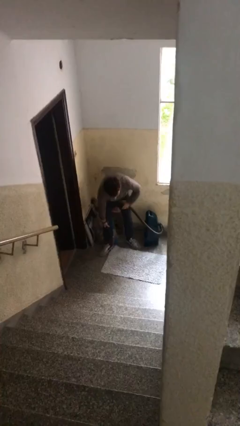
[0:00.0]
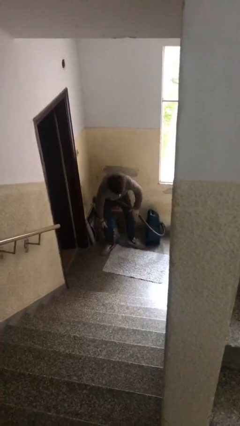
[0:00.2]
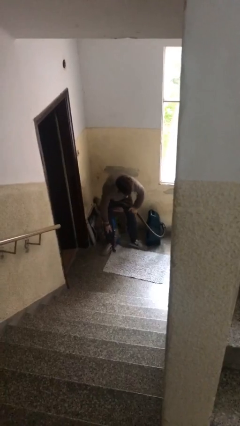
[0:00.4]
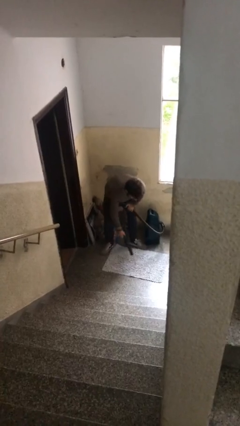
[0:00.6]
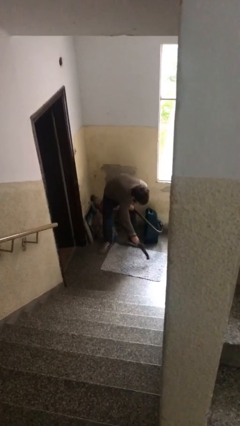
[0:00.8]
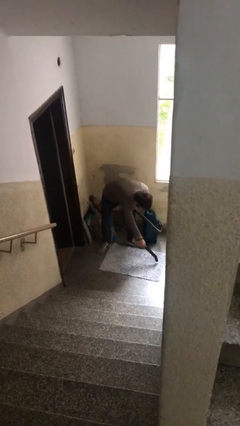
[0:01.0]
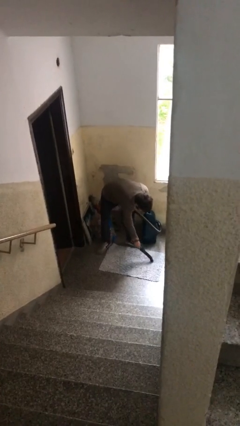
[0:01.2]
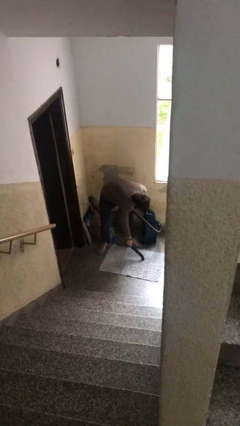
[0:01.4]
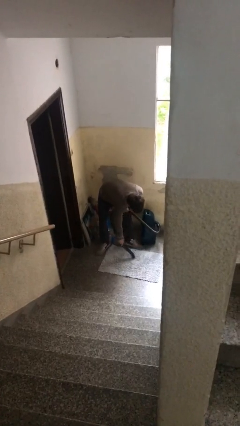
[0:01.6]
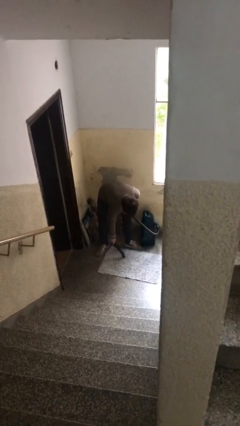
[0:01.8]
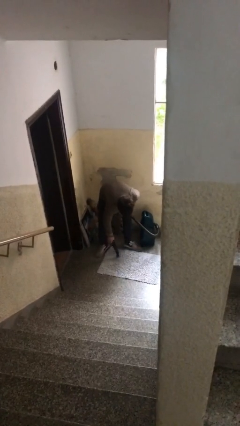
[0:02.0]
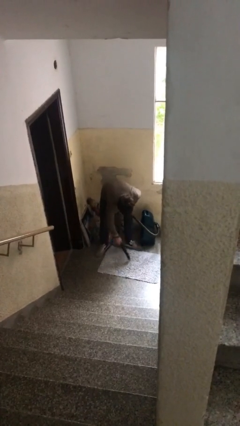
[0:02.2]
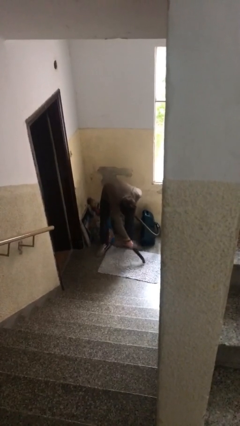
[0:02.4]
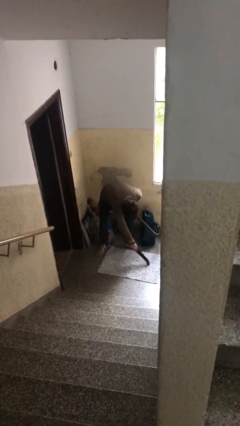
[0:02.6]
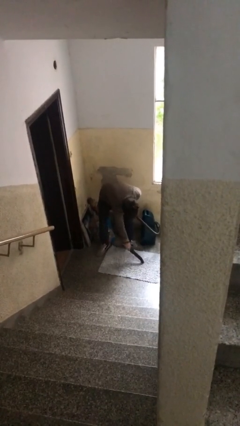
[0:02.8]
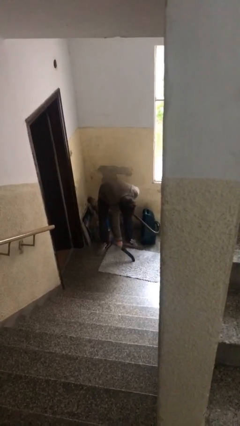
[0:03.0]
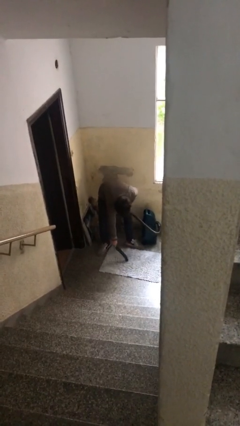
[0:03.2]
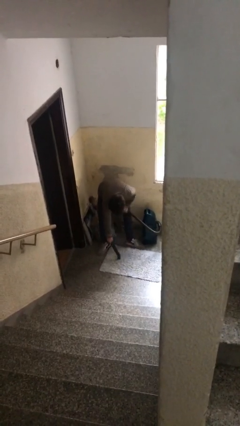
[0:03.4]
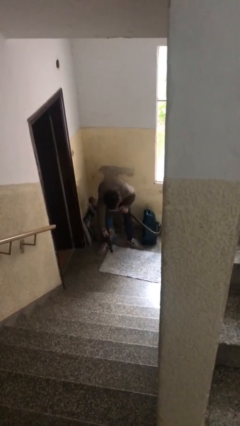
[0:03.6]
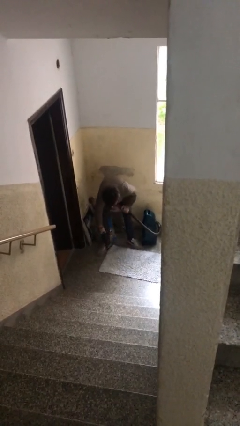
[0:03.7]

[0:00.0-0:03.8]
person vacuums carpet

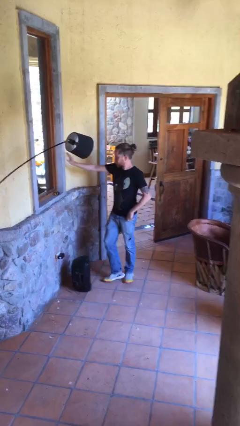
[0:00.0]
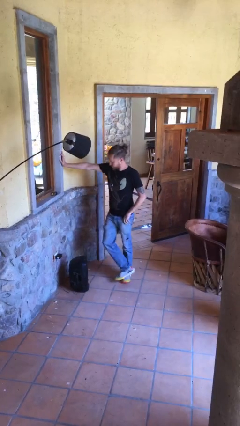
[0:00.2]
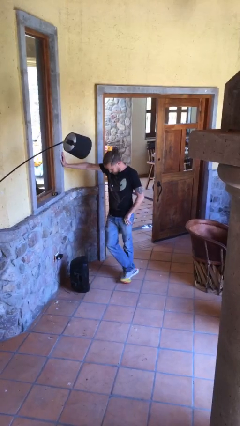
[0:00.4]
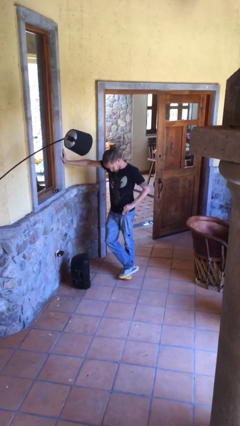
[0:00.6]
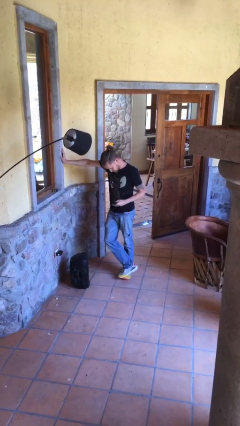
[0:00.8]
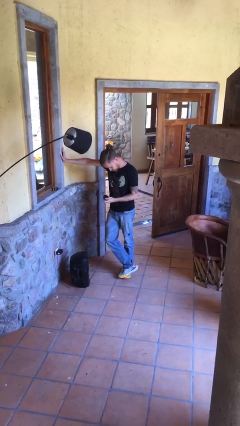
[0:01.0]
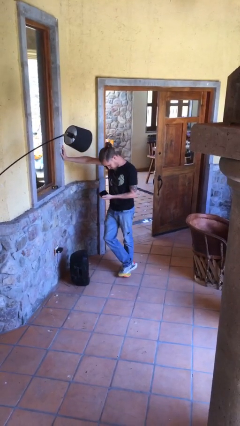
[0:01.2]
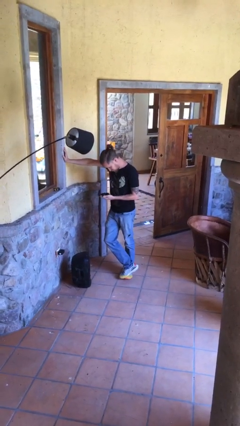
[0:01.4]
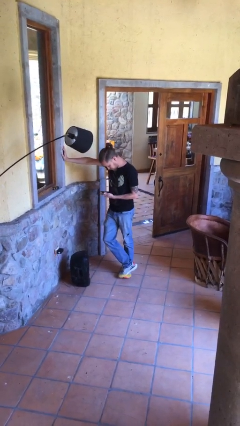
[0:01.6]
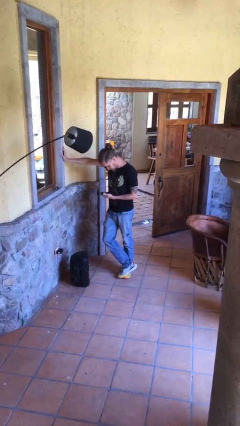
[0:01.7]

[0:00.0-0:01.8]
person takes phone from pocket

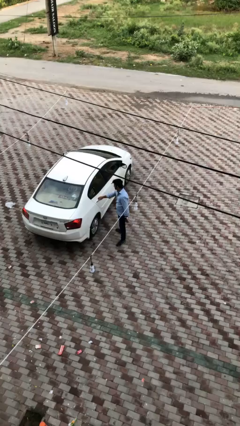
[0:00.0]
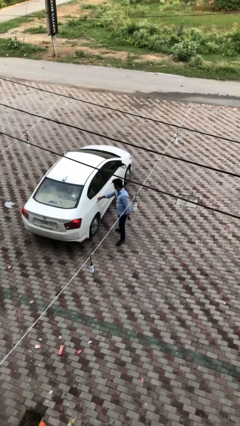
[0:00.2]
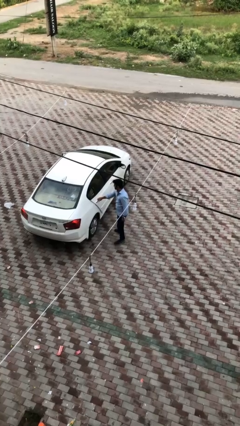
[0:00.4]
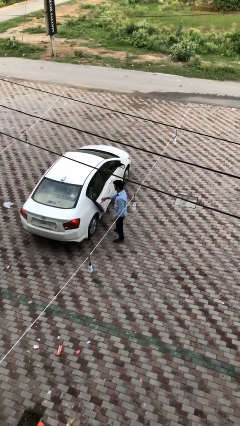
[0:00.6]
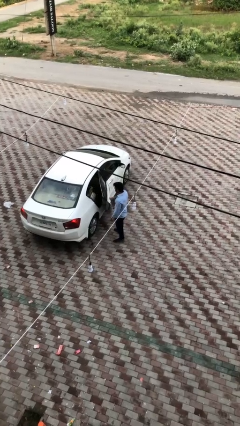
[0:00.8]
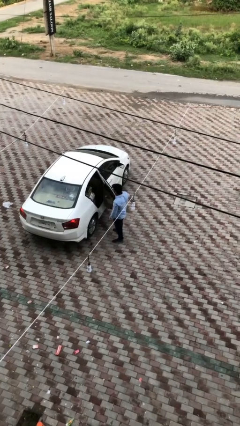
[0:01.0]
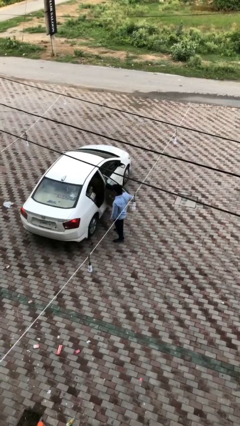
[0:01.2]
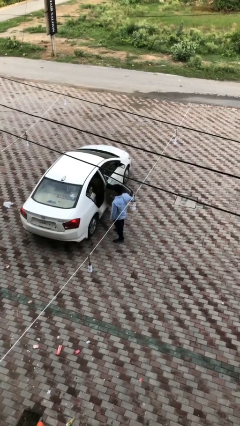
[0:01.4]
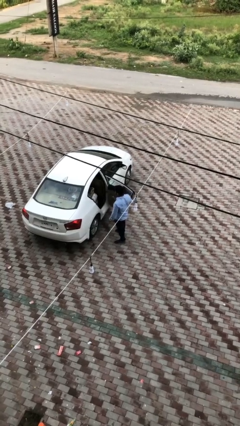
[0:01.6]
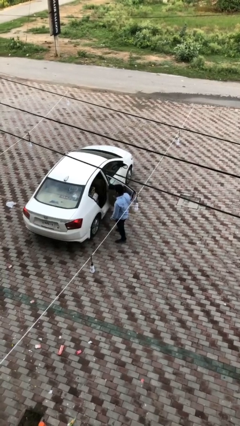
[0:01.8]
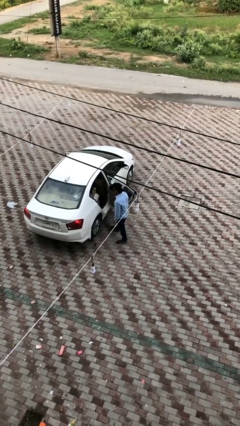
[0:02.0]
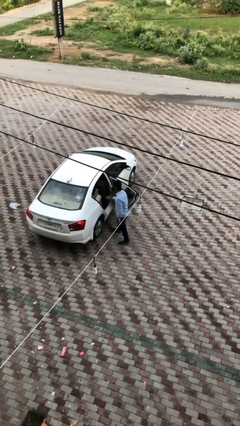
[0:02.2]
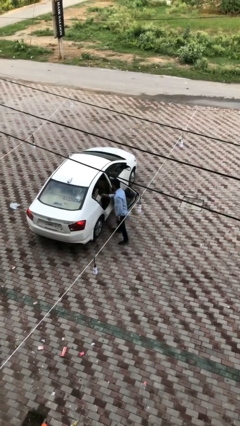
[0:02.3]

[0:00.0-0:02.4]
person opens car door

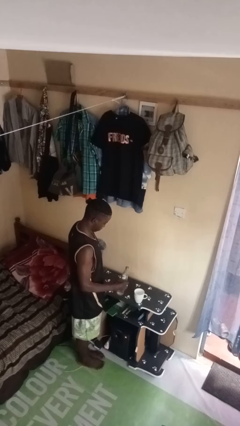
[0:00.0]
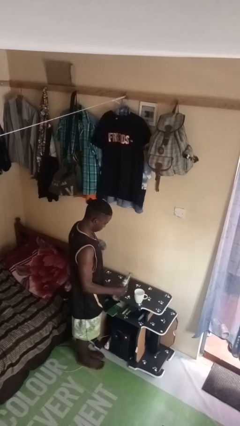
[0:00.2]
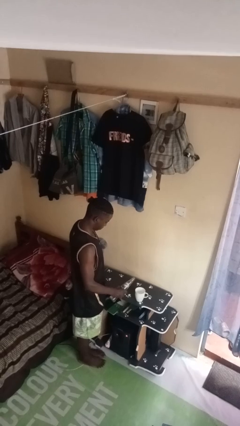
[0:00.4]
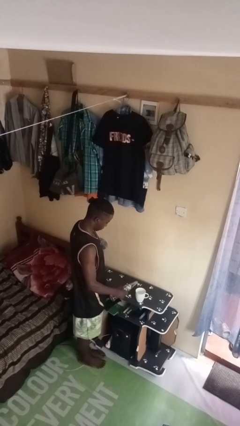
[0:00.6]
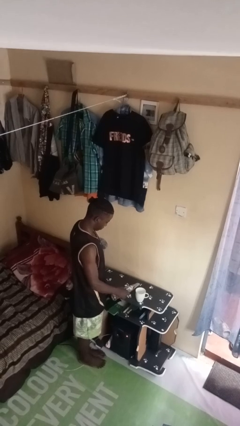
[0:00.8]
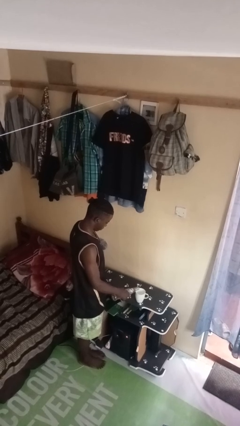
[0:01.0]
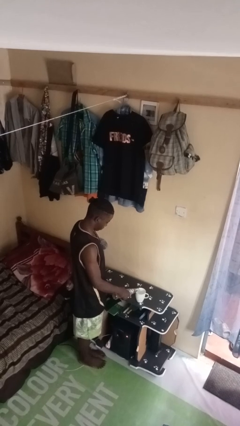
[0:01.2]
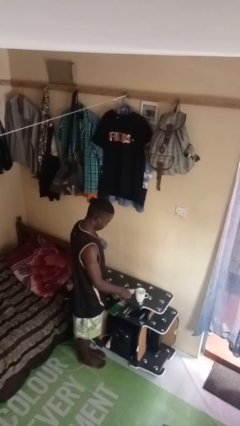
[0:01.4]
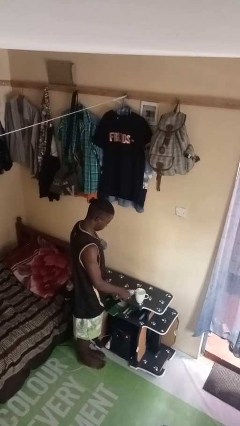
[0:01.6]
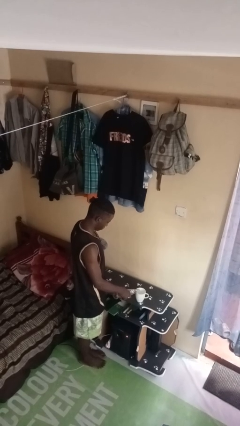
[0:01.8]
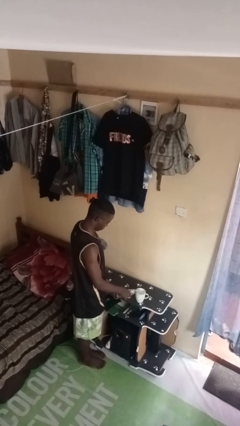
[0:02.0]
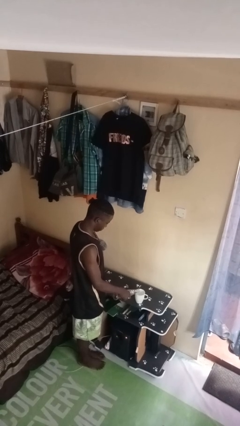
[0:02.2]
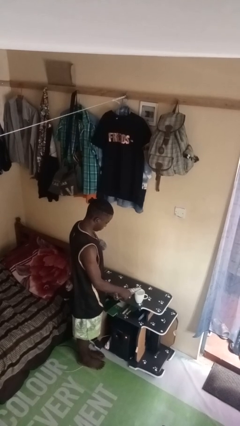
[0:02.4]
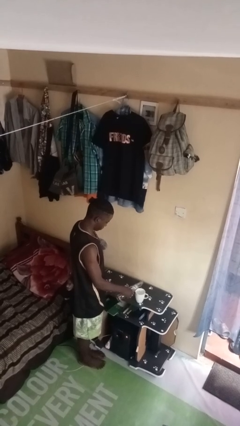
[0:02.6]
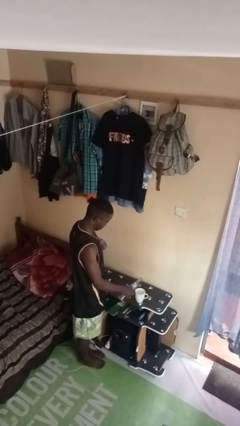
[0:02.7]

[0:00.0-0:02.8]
person pours liquid into cup

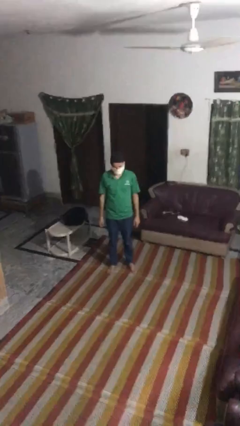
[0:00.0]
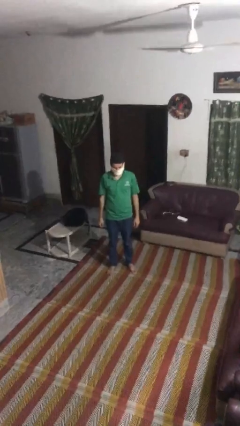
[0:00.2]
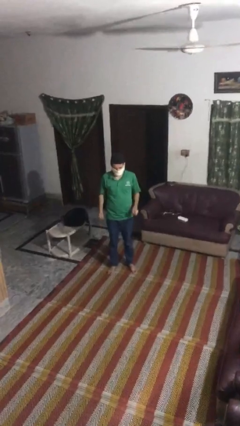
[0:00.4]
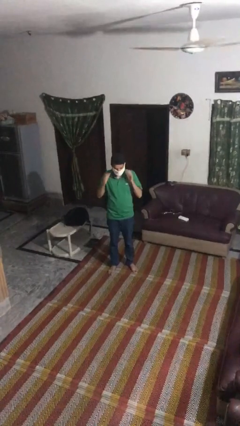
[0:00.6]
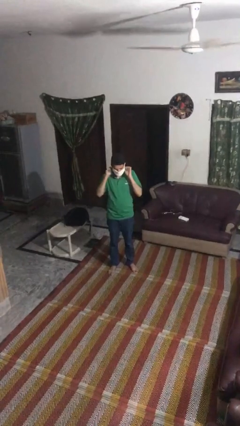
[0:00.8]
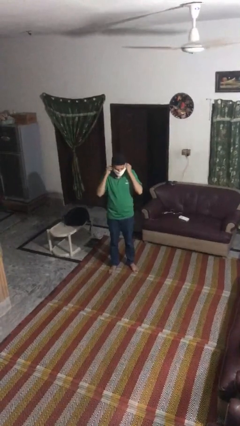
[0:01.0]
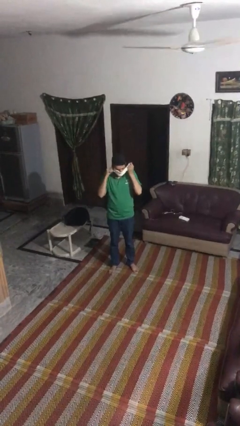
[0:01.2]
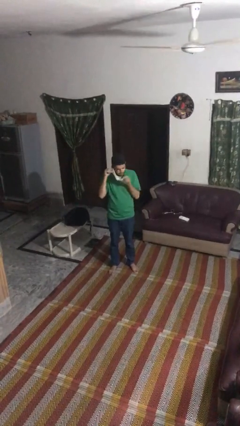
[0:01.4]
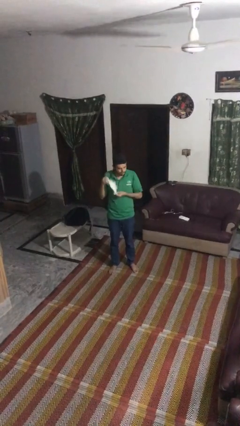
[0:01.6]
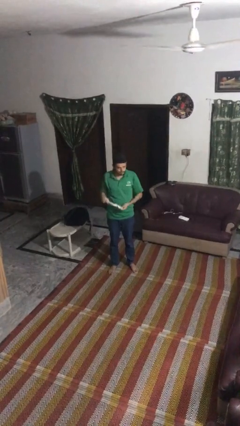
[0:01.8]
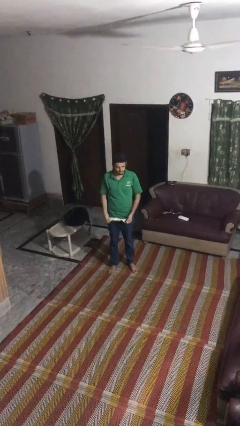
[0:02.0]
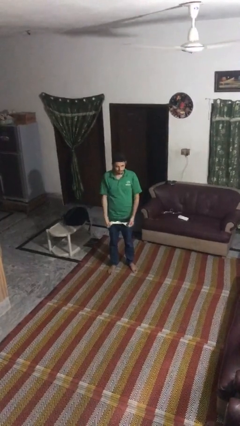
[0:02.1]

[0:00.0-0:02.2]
person takes off facemask

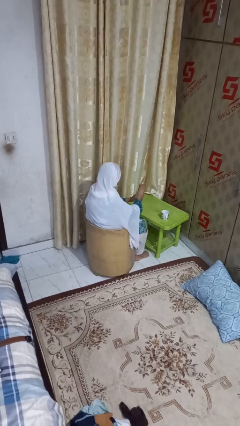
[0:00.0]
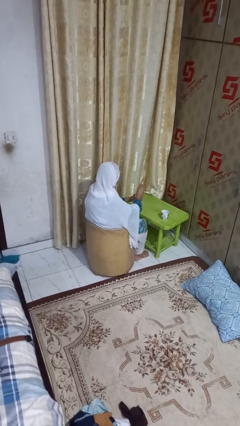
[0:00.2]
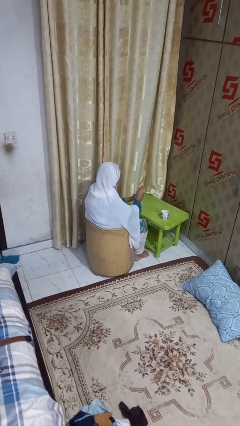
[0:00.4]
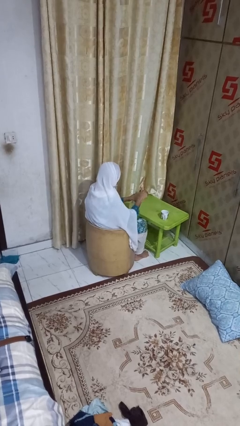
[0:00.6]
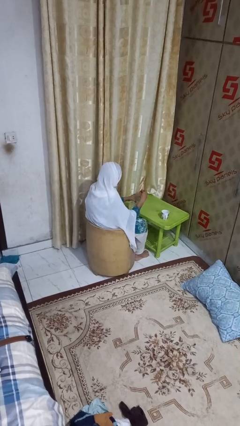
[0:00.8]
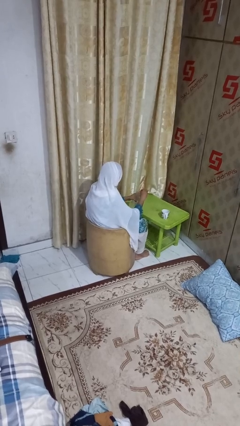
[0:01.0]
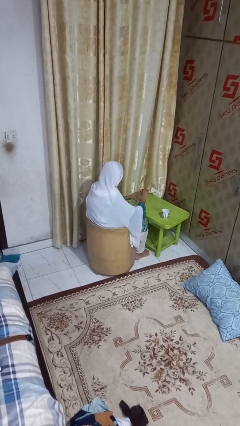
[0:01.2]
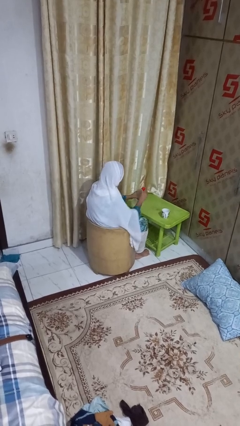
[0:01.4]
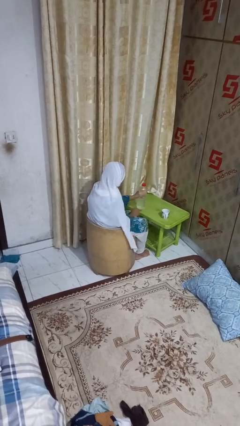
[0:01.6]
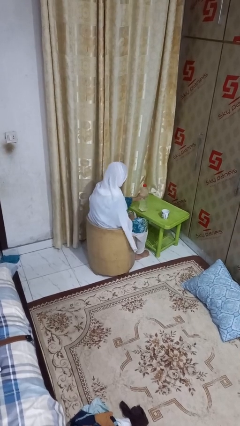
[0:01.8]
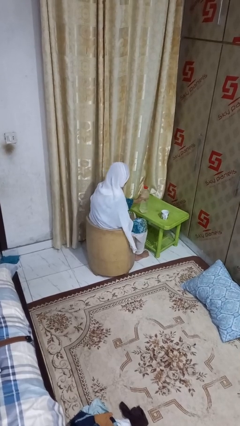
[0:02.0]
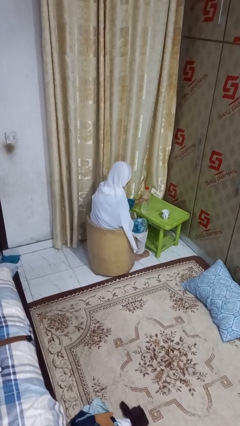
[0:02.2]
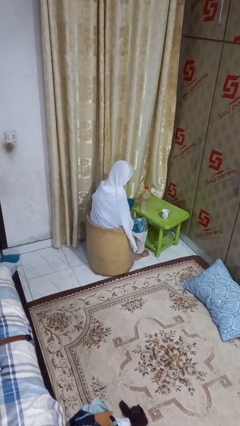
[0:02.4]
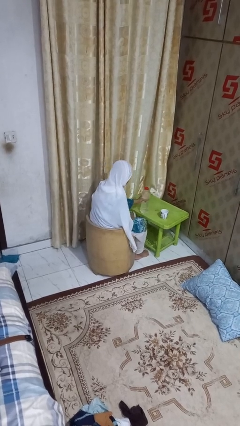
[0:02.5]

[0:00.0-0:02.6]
person screws lid to bottle

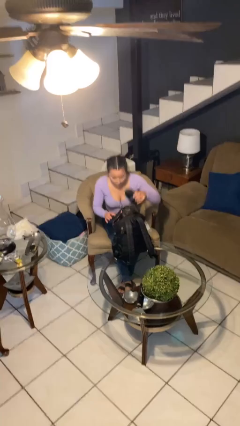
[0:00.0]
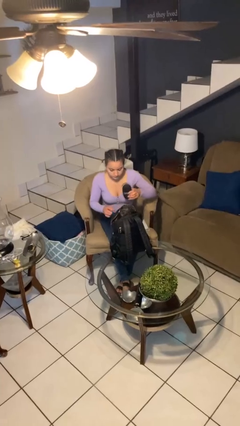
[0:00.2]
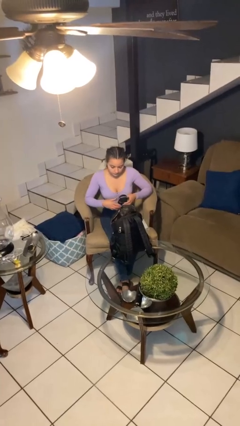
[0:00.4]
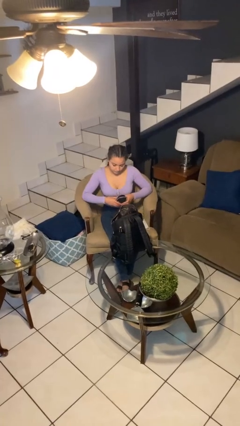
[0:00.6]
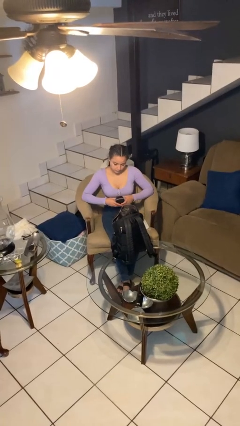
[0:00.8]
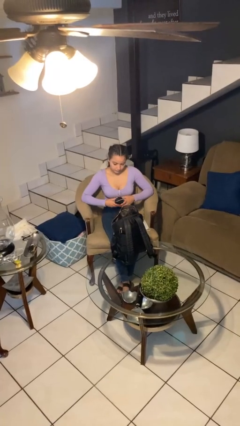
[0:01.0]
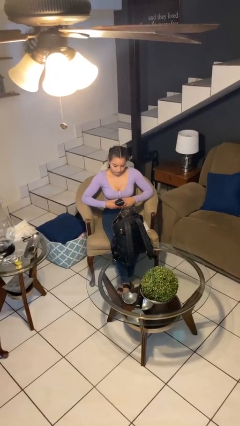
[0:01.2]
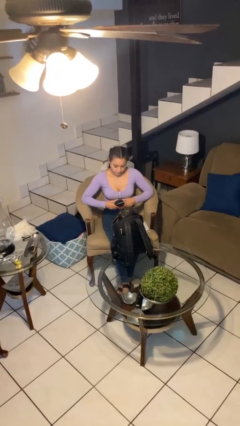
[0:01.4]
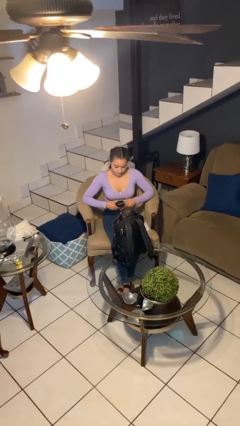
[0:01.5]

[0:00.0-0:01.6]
person takes object from backpack
